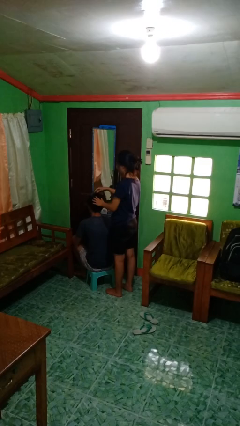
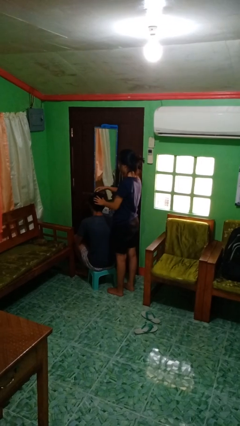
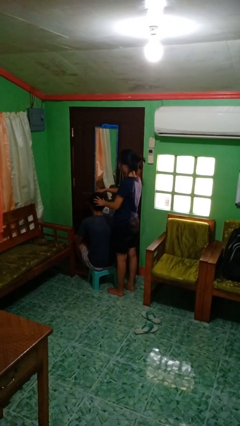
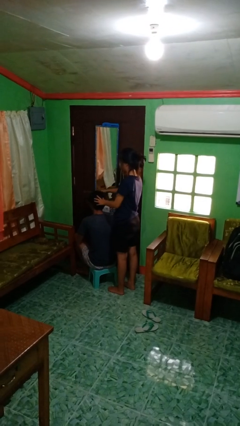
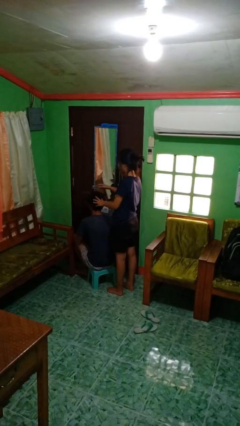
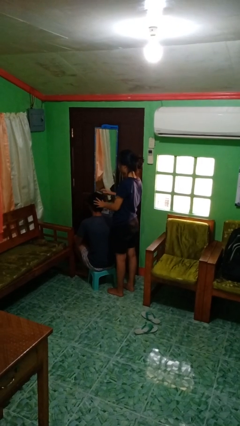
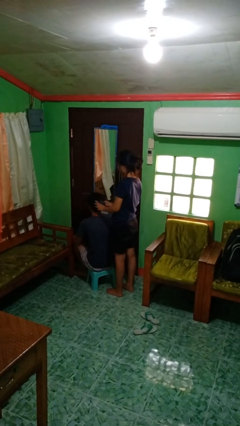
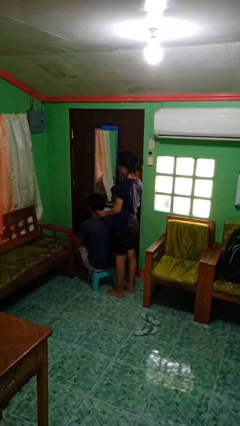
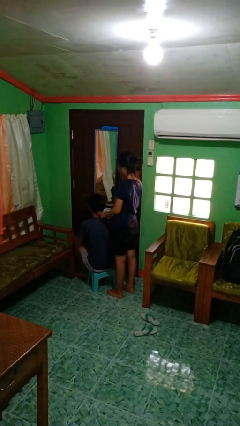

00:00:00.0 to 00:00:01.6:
person brushes hair of person

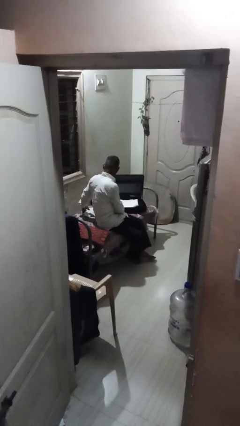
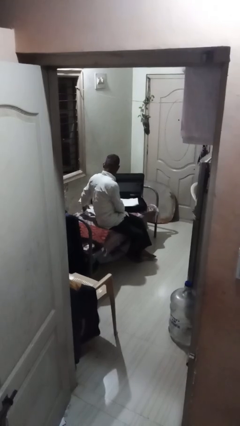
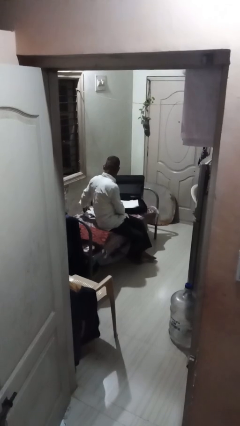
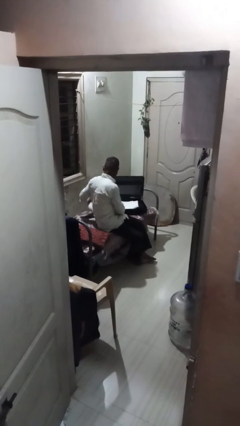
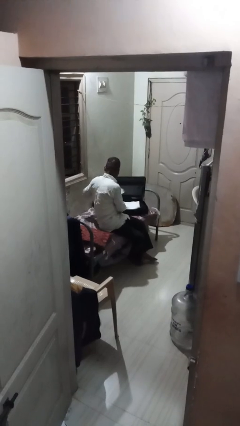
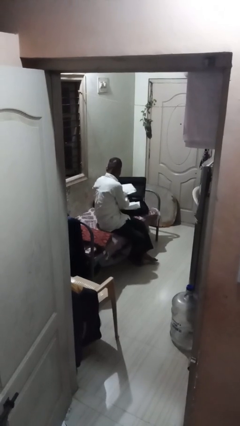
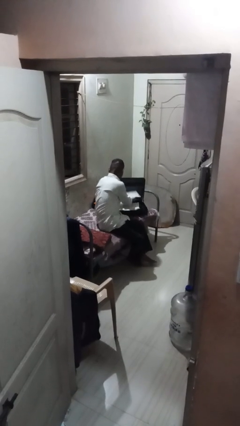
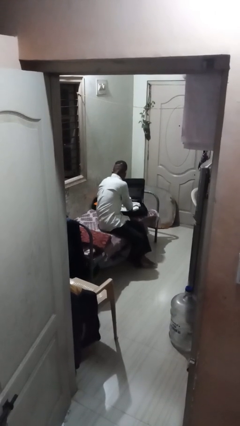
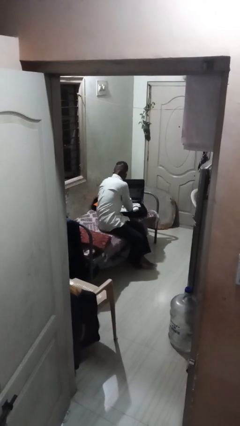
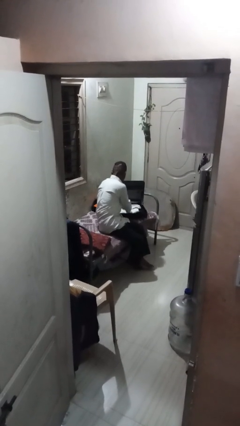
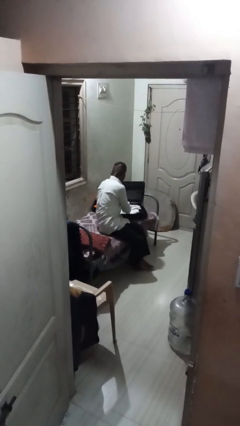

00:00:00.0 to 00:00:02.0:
person loads clothes into suitcase

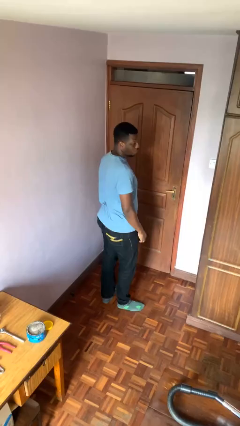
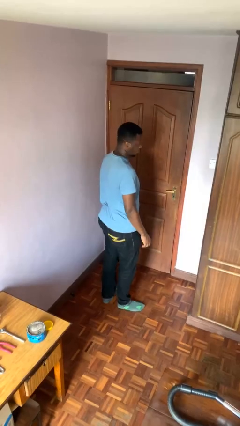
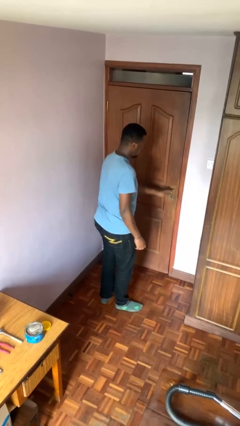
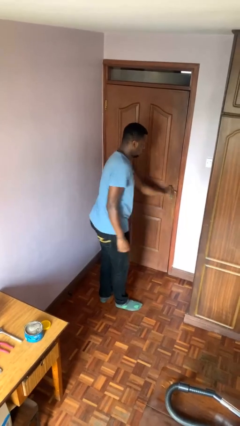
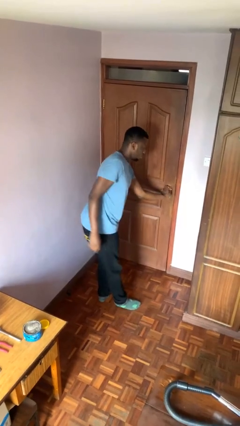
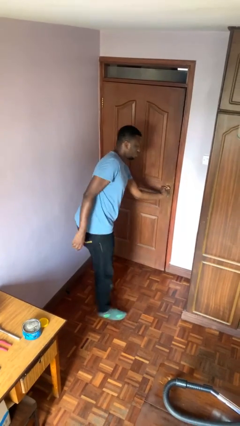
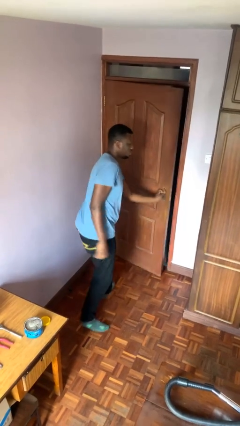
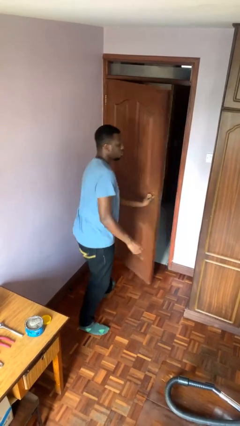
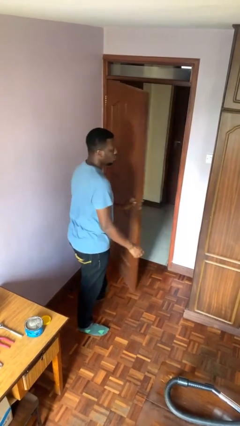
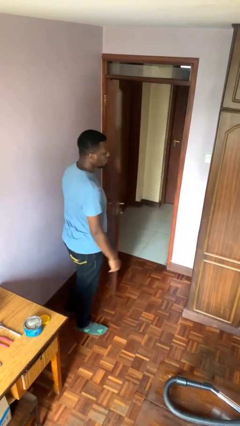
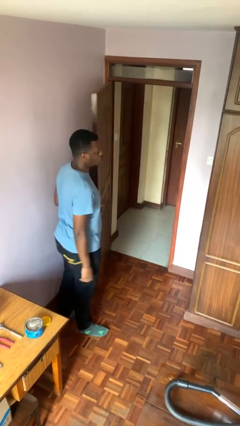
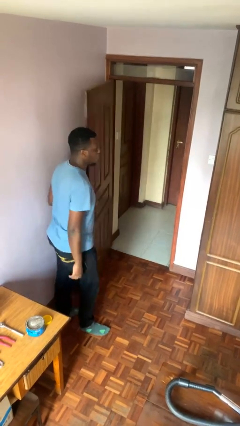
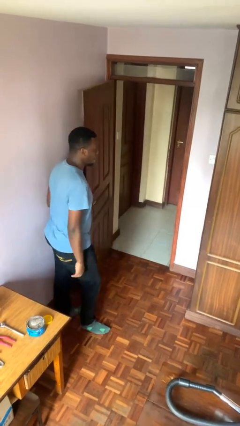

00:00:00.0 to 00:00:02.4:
person opens facility door

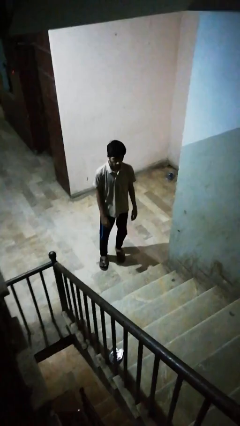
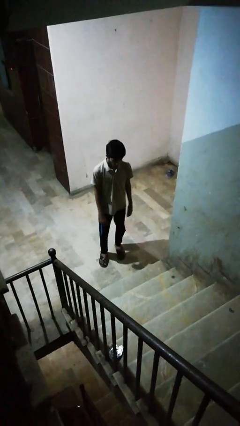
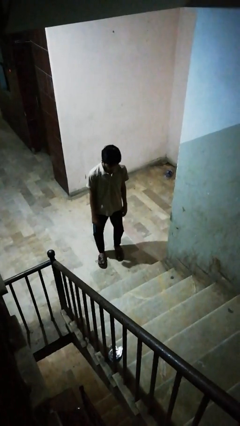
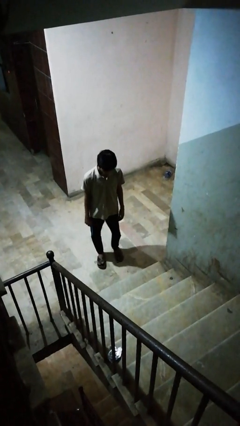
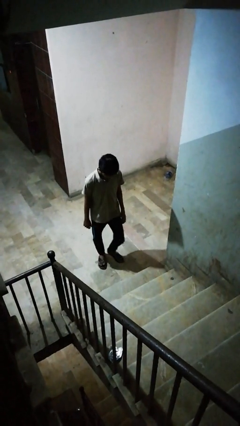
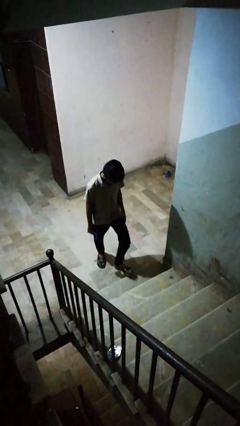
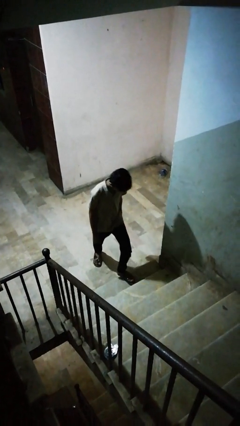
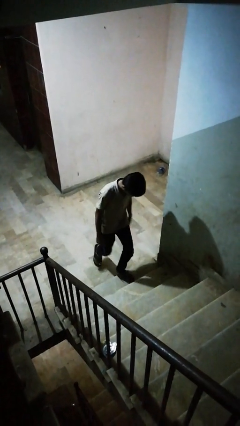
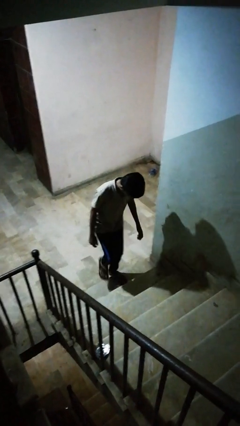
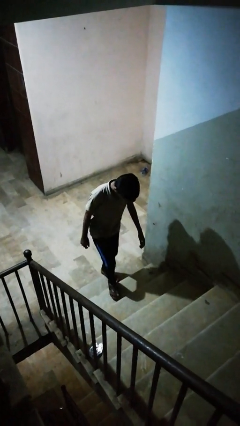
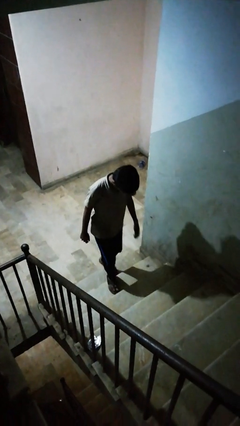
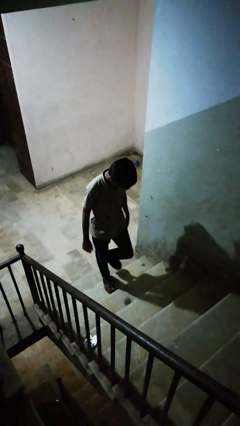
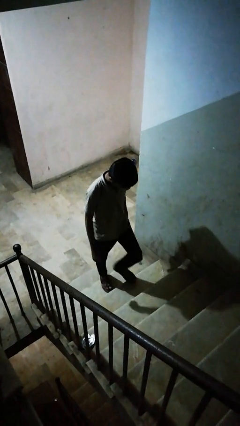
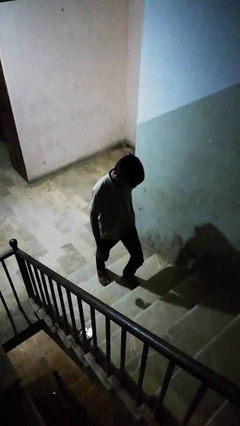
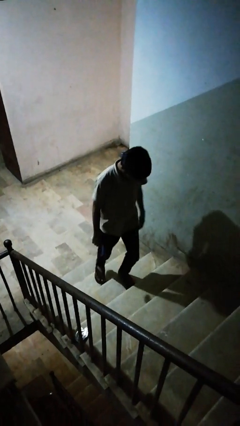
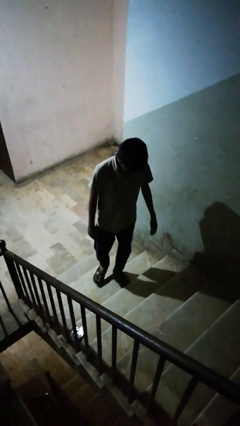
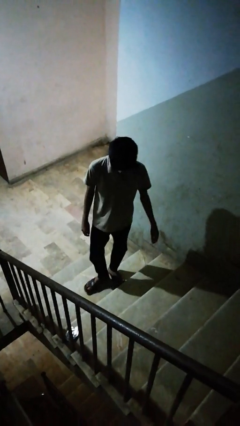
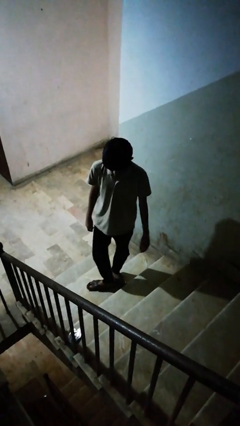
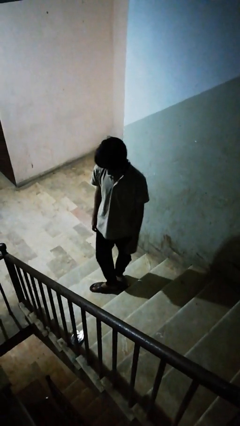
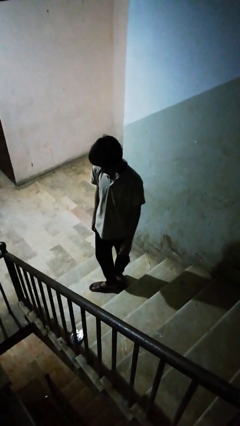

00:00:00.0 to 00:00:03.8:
person climbs up stairs

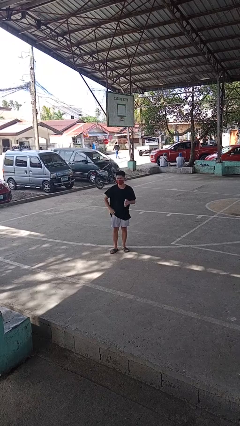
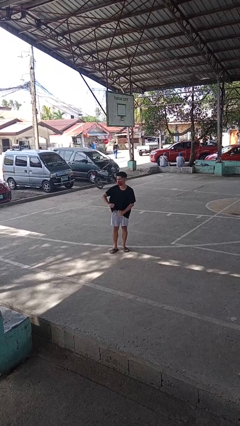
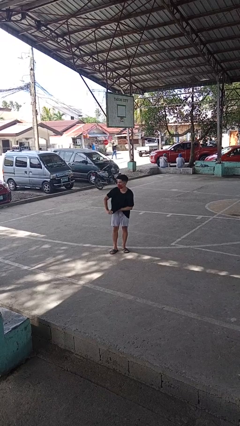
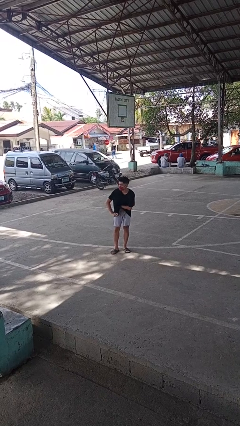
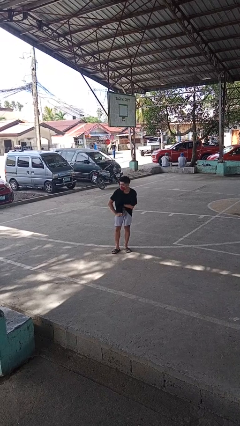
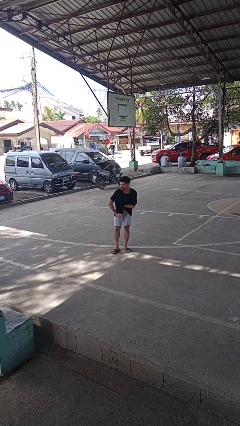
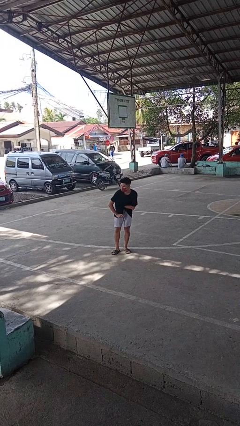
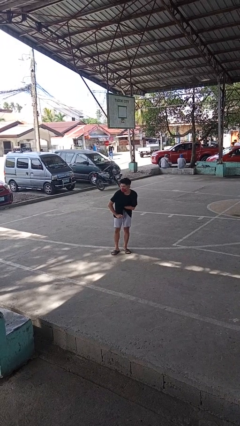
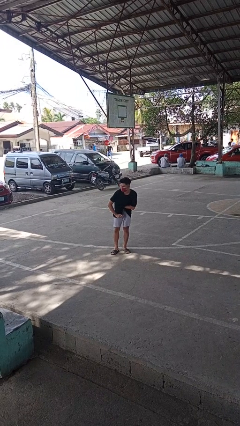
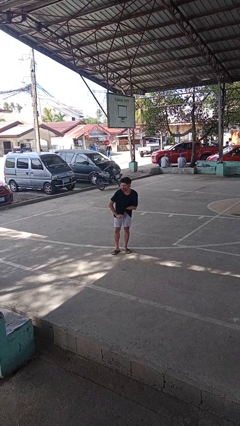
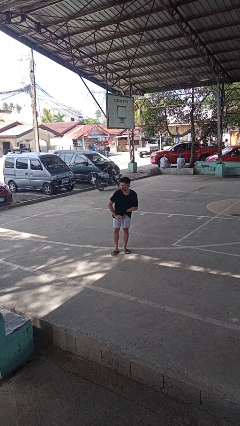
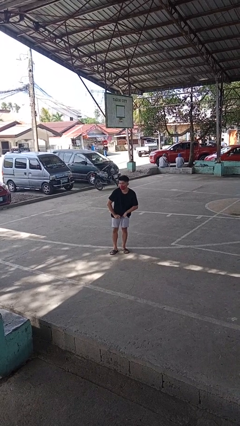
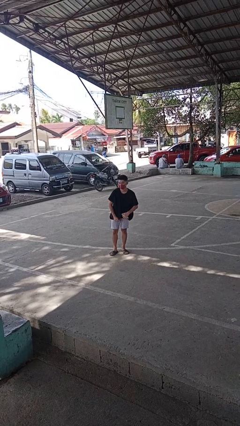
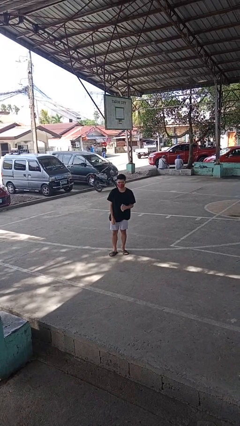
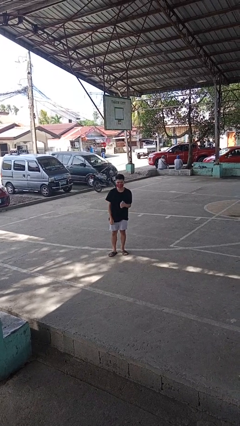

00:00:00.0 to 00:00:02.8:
person applies deodorant

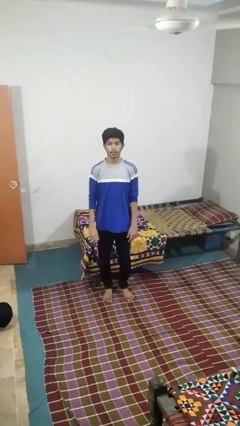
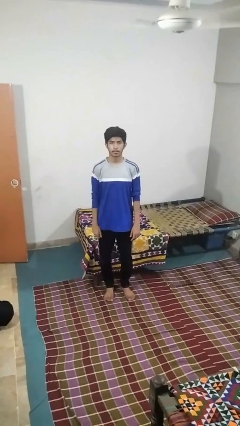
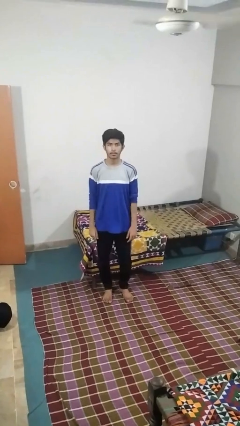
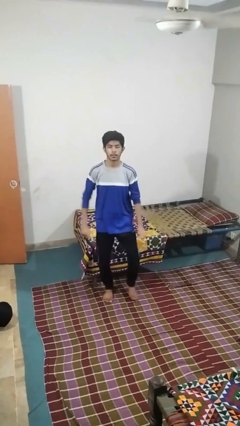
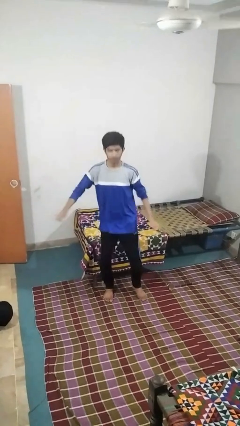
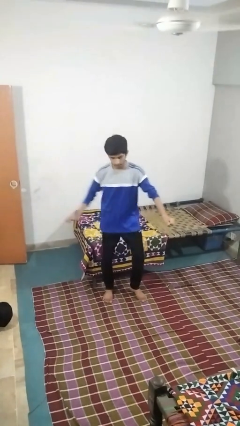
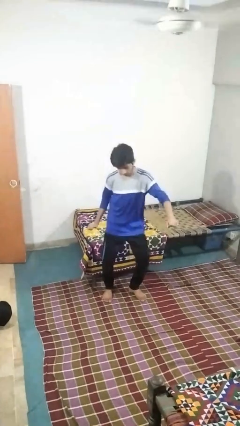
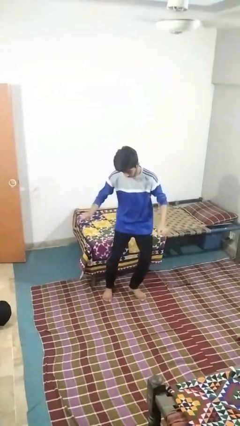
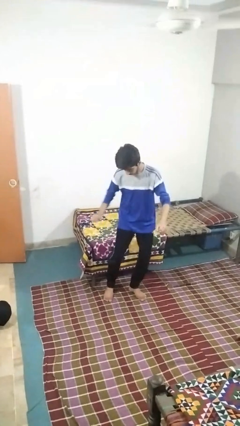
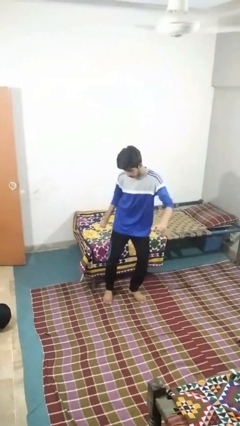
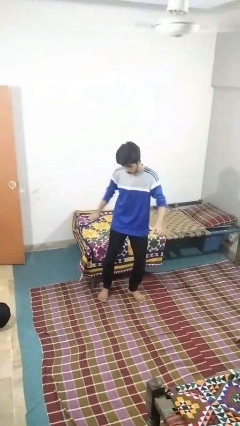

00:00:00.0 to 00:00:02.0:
person dances in place

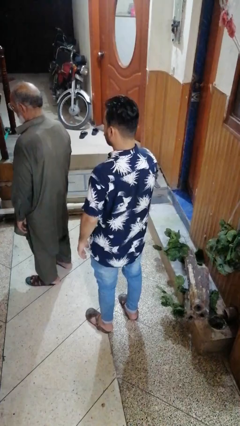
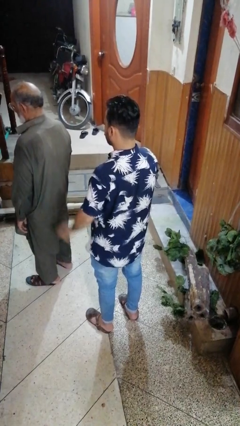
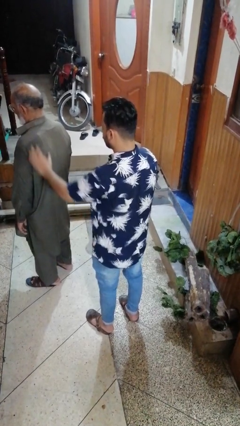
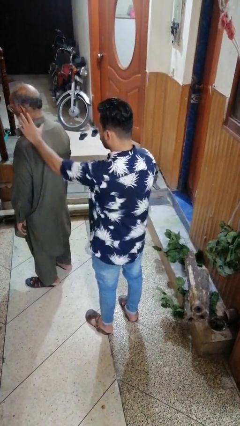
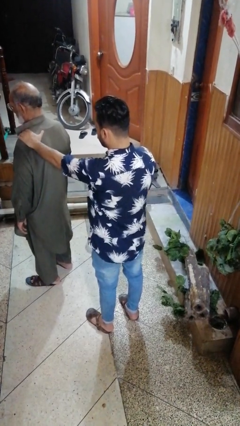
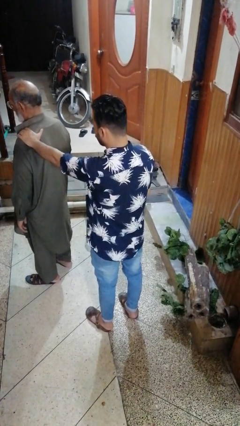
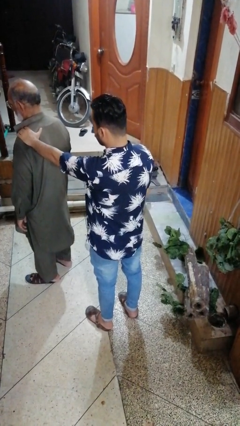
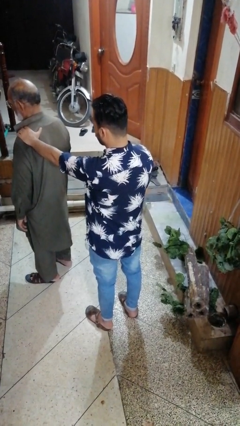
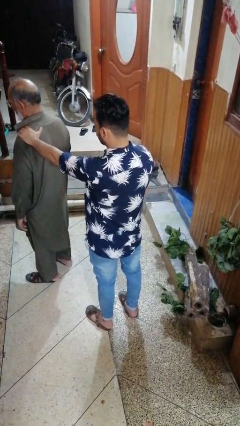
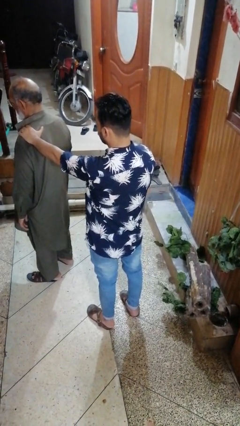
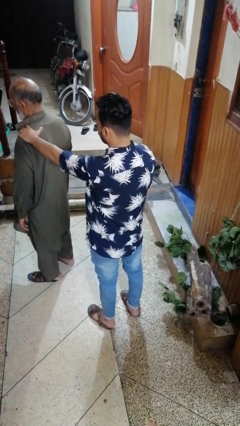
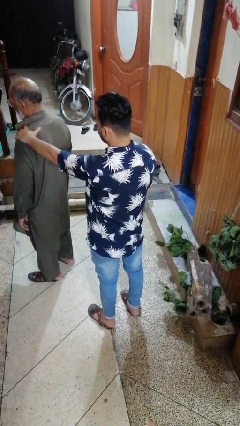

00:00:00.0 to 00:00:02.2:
person grabs person by shoulder
